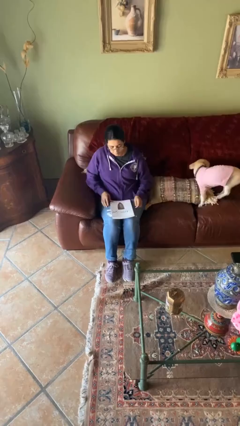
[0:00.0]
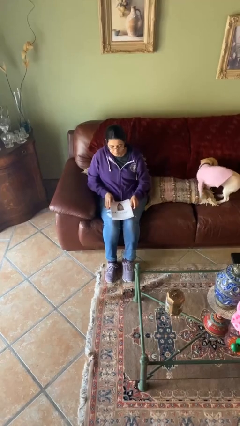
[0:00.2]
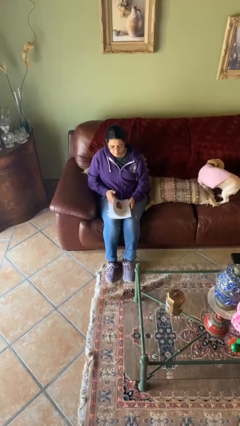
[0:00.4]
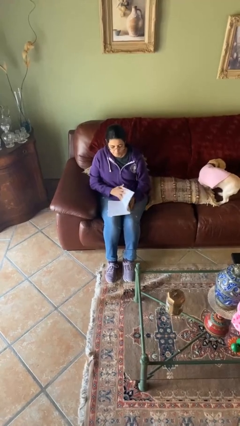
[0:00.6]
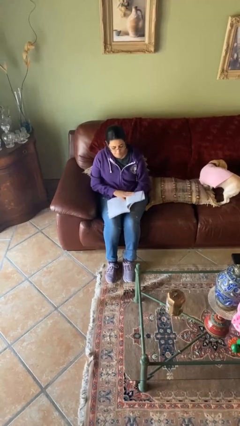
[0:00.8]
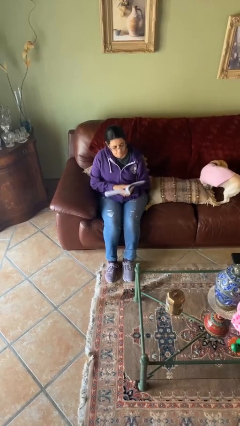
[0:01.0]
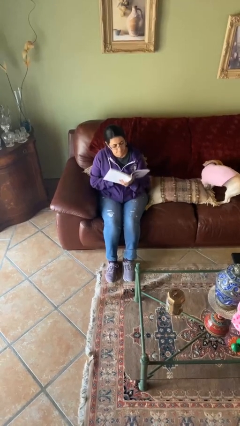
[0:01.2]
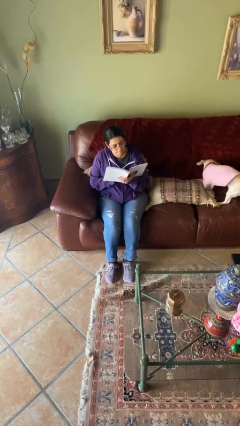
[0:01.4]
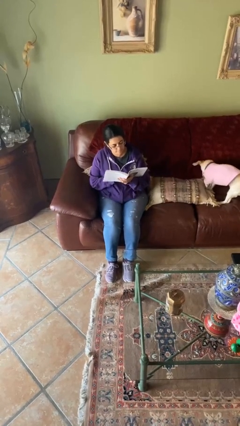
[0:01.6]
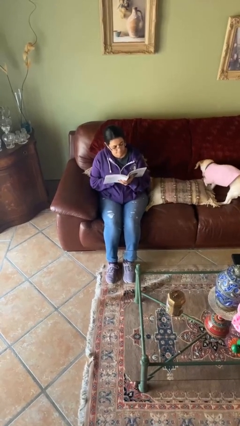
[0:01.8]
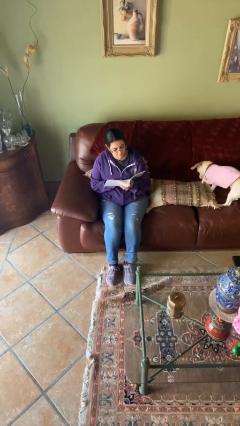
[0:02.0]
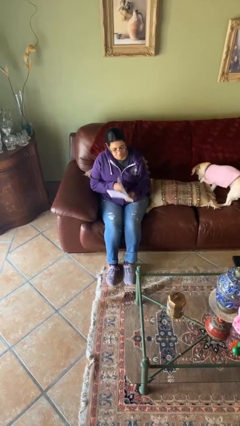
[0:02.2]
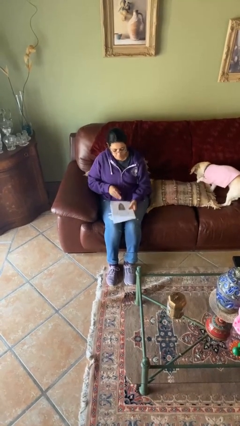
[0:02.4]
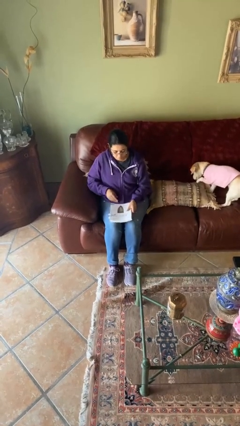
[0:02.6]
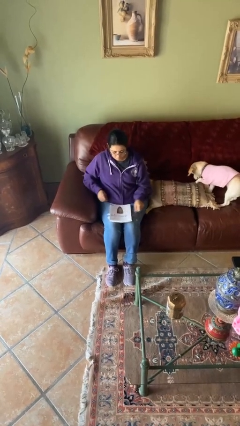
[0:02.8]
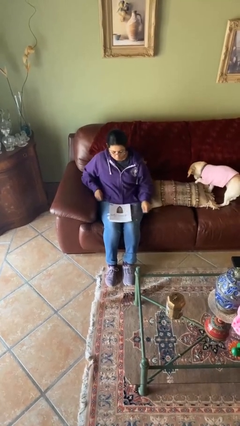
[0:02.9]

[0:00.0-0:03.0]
person reads document

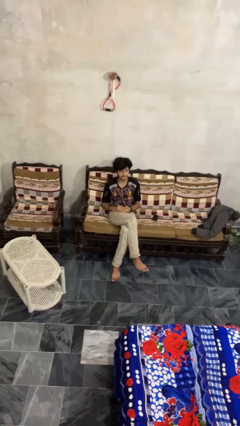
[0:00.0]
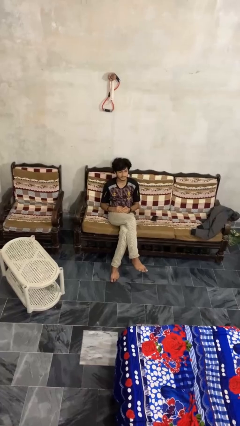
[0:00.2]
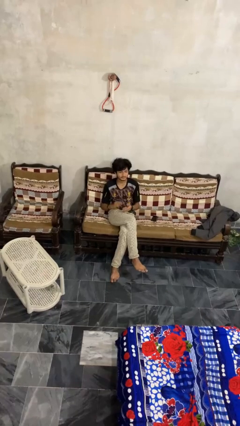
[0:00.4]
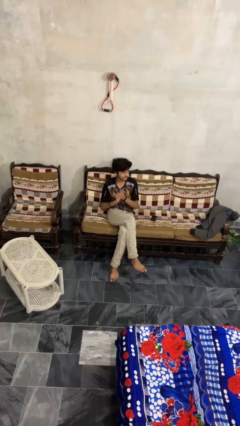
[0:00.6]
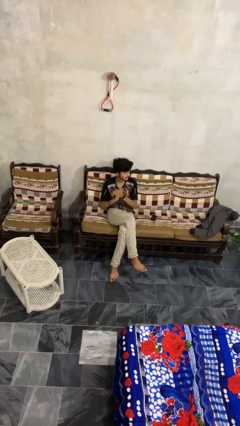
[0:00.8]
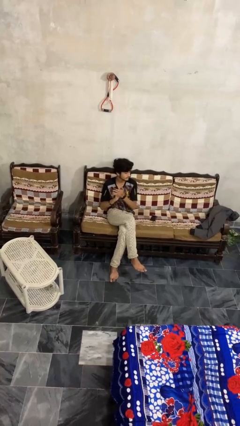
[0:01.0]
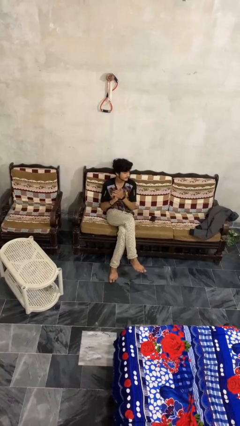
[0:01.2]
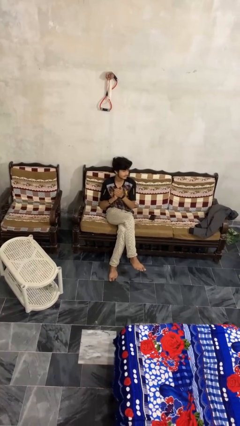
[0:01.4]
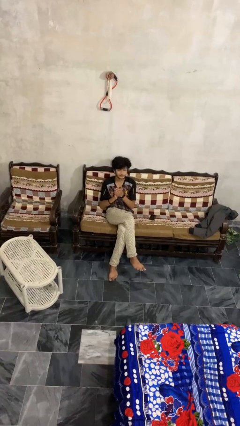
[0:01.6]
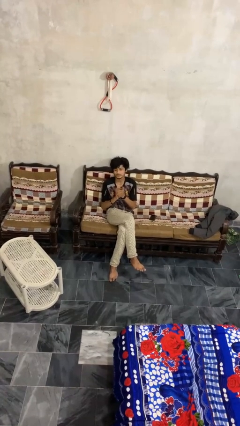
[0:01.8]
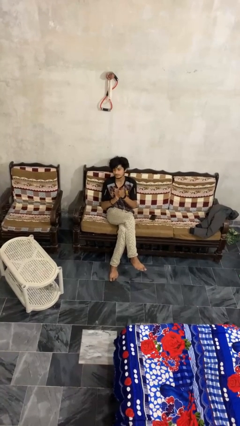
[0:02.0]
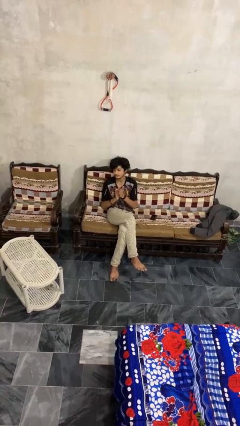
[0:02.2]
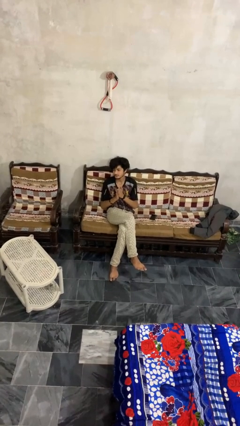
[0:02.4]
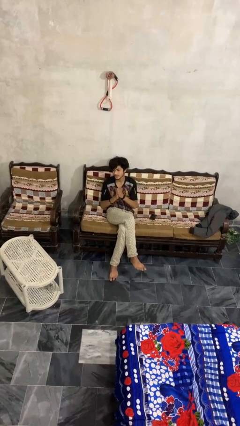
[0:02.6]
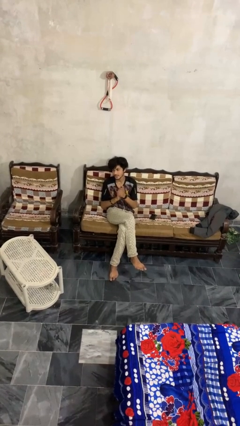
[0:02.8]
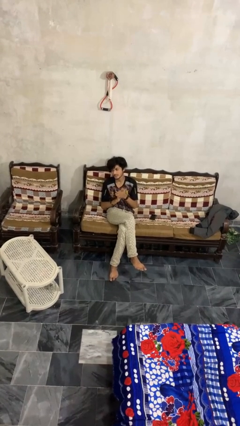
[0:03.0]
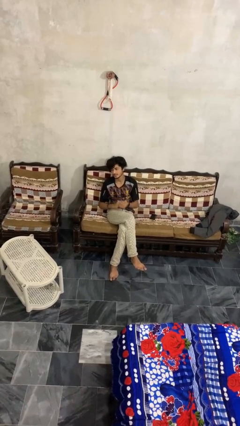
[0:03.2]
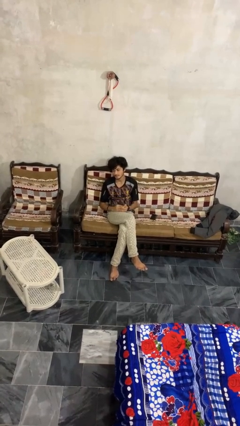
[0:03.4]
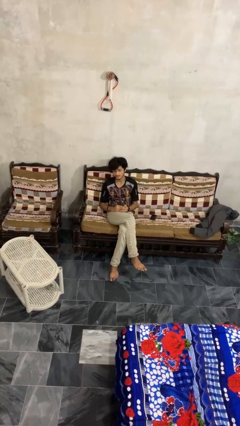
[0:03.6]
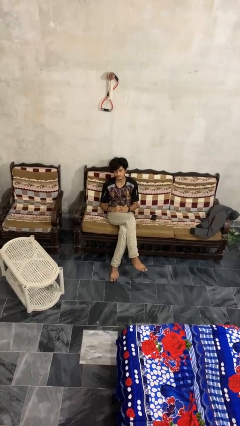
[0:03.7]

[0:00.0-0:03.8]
person claps hands

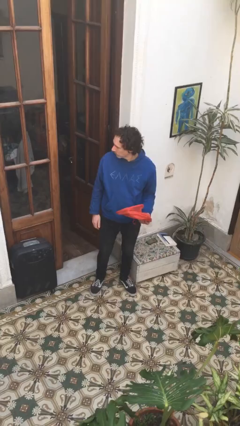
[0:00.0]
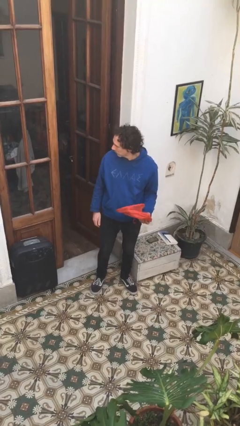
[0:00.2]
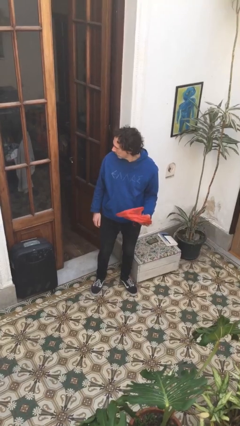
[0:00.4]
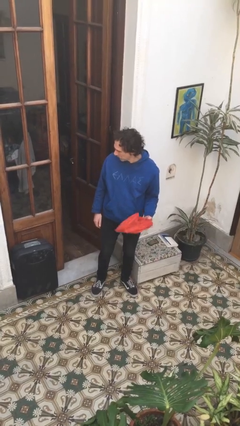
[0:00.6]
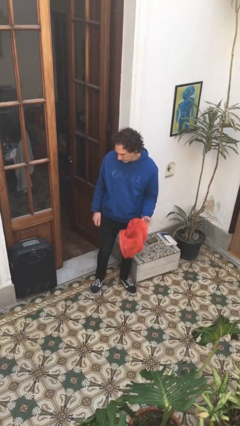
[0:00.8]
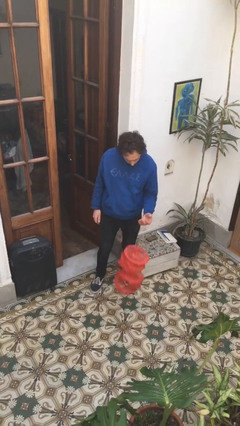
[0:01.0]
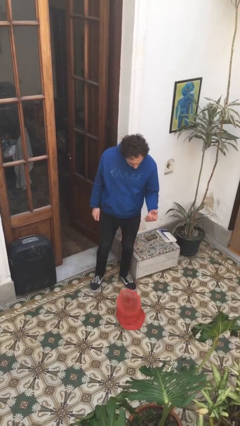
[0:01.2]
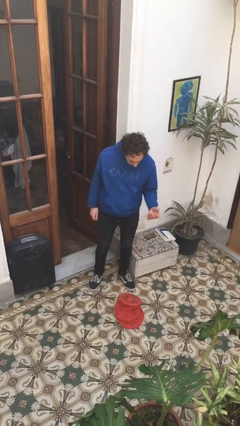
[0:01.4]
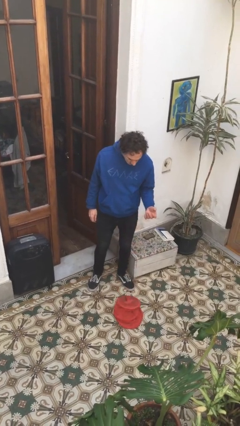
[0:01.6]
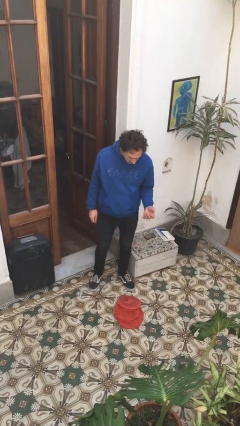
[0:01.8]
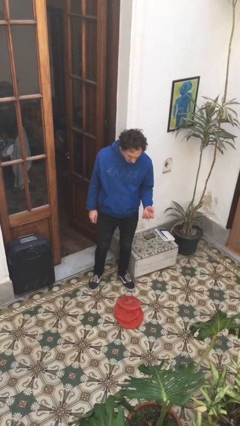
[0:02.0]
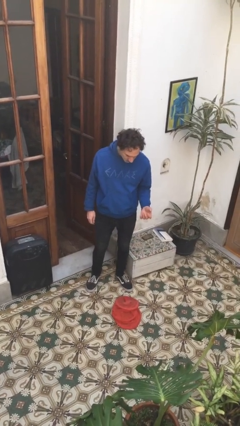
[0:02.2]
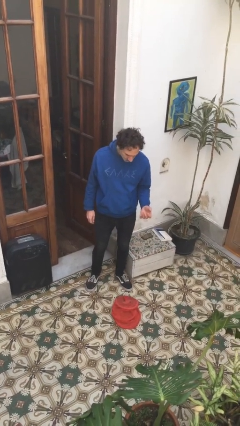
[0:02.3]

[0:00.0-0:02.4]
person drops object

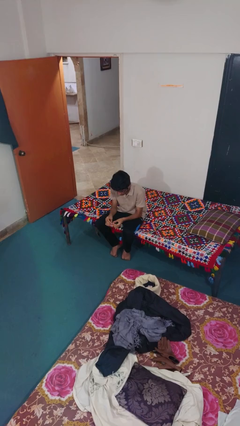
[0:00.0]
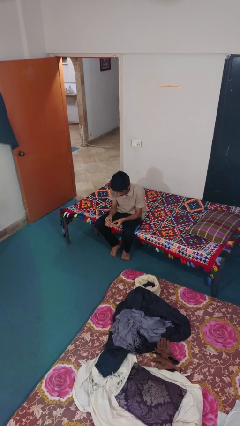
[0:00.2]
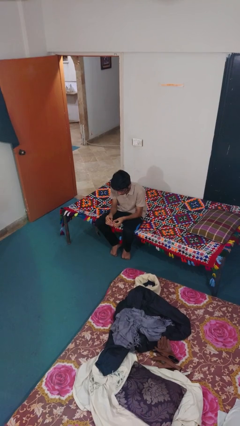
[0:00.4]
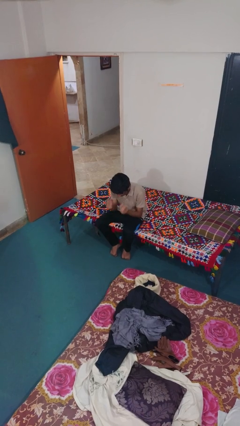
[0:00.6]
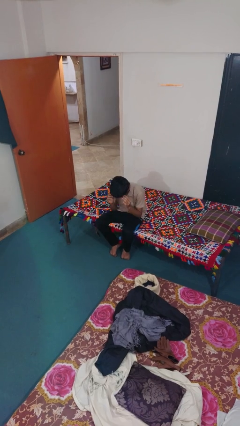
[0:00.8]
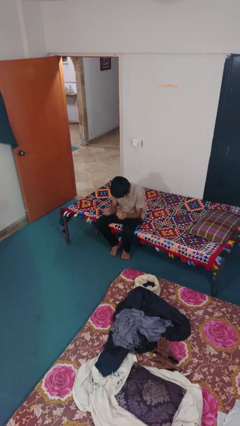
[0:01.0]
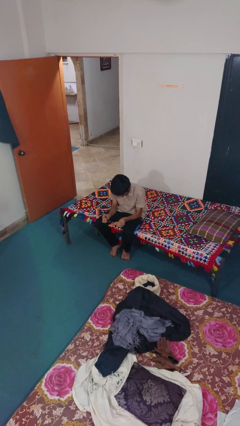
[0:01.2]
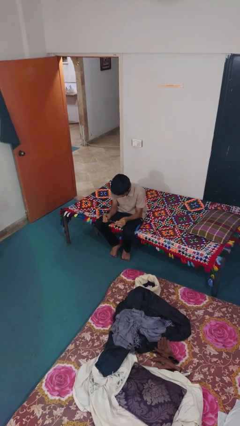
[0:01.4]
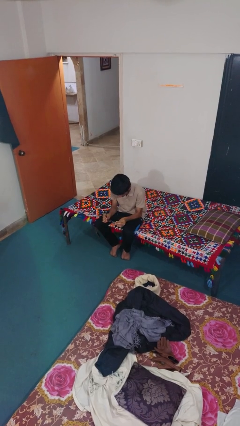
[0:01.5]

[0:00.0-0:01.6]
person takes off glasses

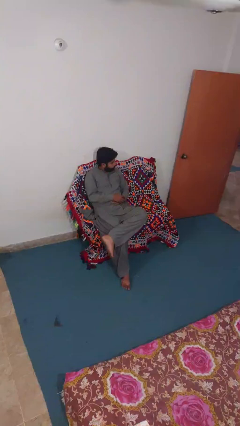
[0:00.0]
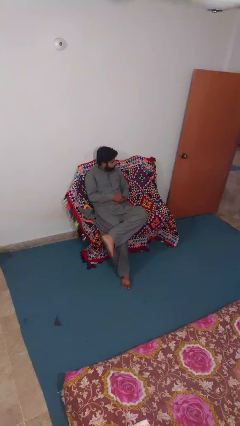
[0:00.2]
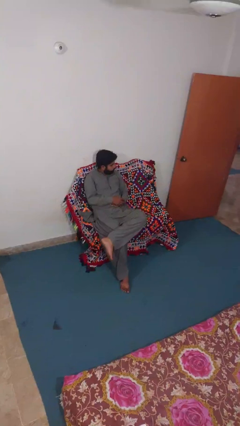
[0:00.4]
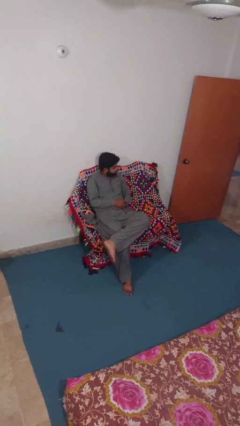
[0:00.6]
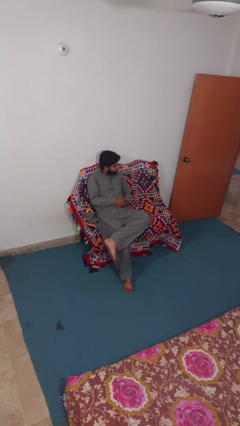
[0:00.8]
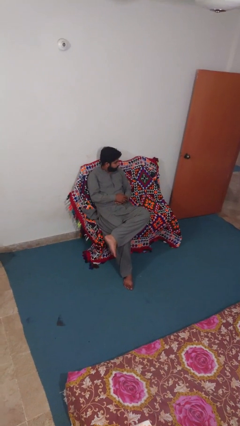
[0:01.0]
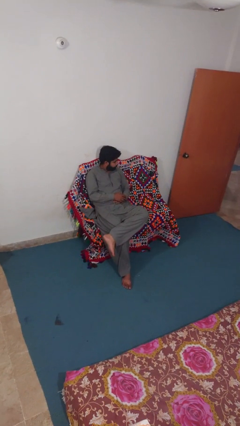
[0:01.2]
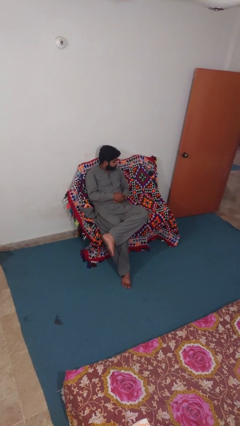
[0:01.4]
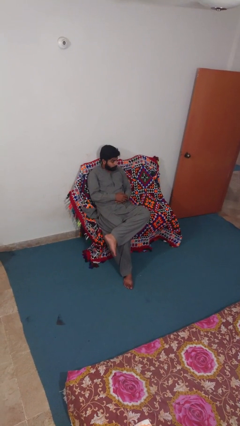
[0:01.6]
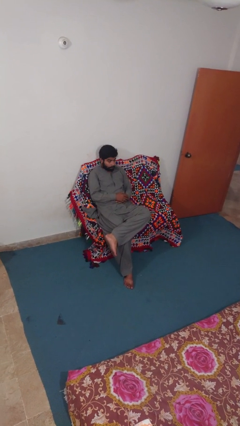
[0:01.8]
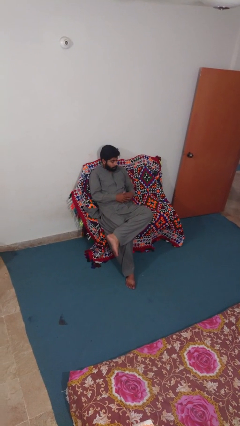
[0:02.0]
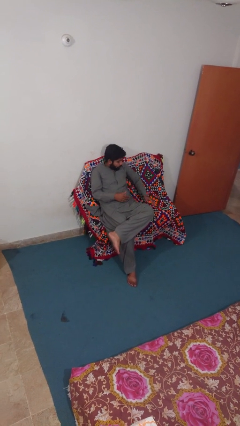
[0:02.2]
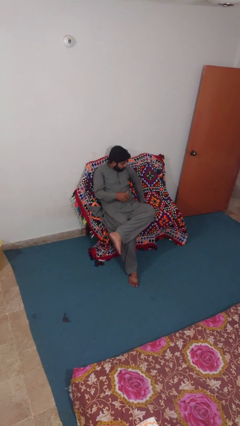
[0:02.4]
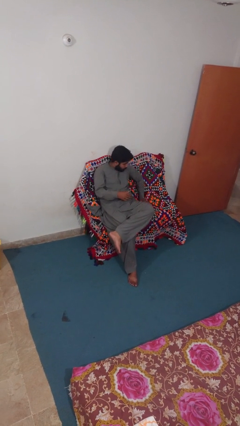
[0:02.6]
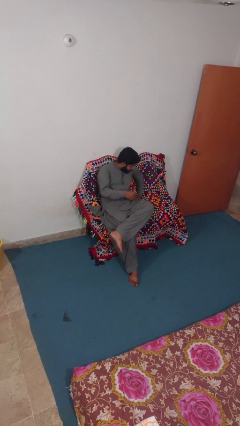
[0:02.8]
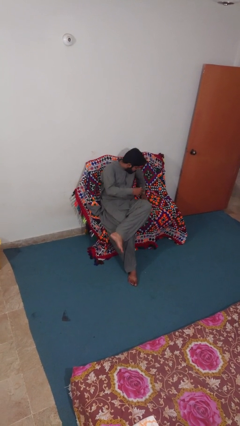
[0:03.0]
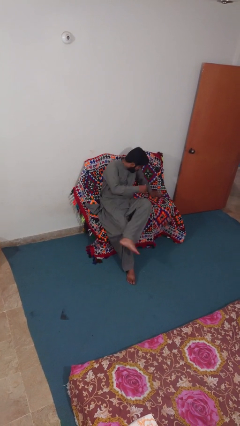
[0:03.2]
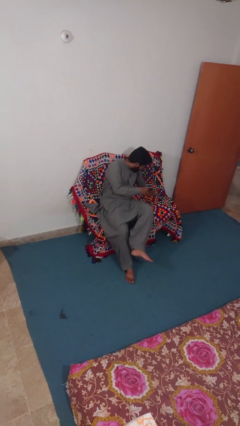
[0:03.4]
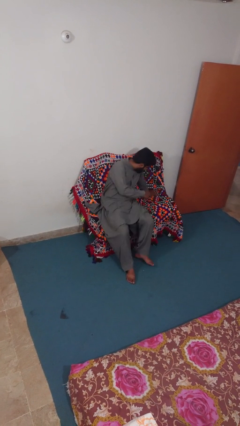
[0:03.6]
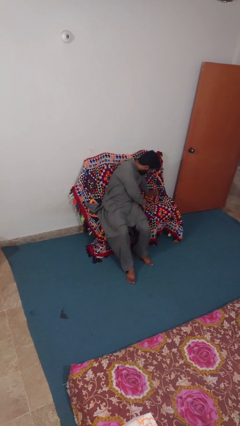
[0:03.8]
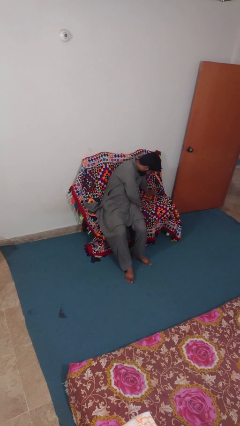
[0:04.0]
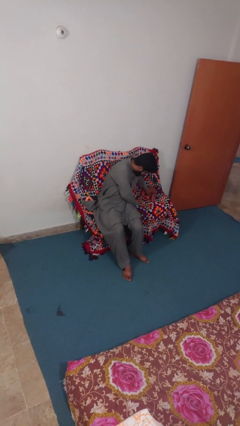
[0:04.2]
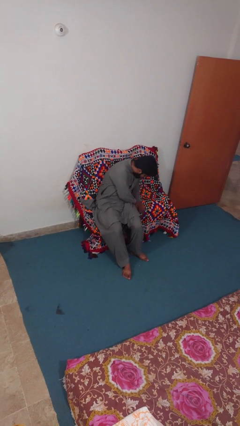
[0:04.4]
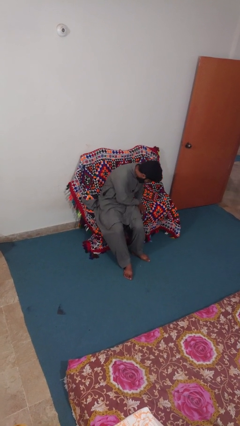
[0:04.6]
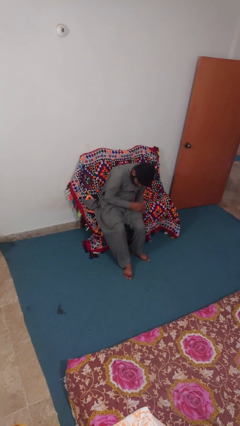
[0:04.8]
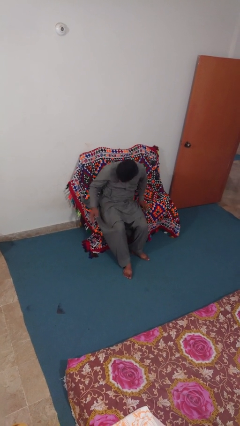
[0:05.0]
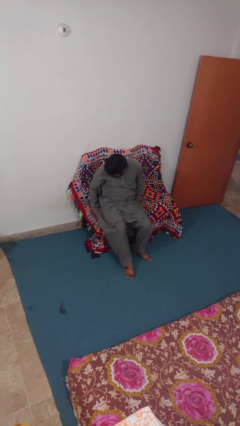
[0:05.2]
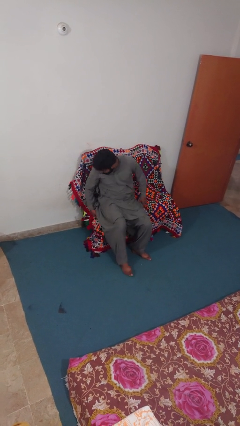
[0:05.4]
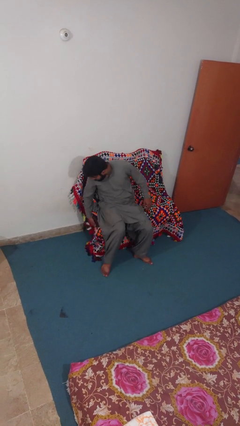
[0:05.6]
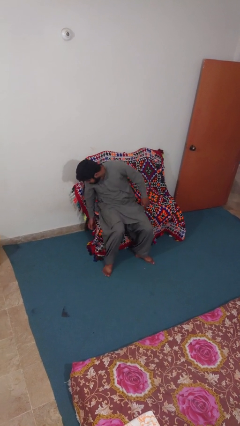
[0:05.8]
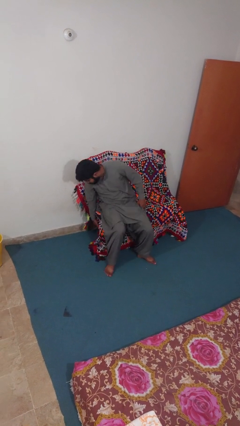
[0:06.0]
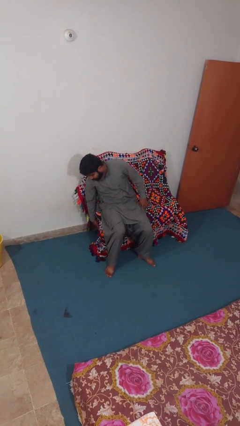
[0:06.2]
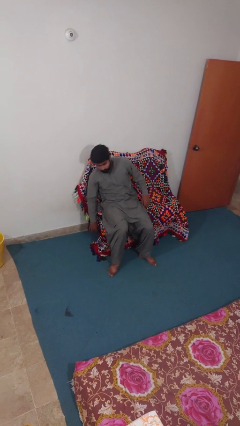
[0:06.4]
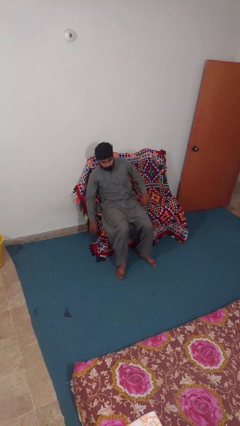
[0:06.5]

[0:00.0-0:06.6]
person searches in couch

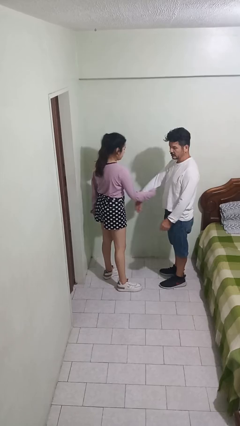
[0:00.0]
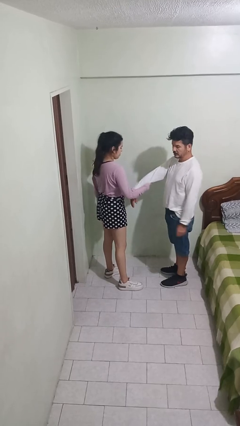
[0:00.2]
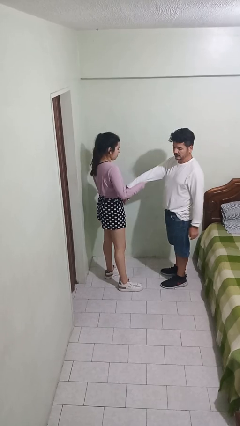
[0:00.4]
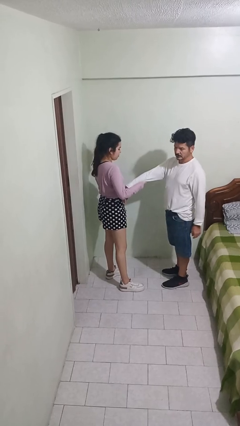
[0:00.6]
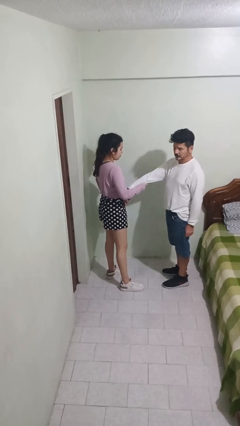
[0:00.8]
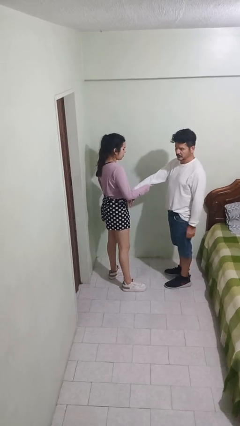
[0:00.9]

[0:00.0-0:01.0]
person grabs person by forearm
